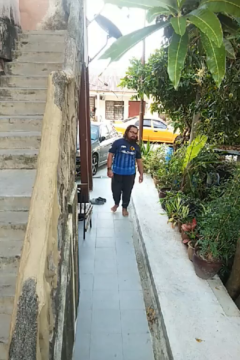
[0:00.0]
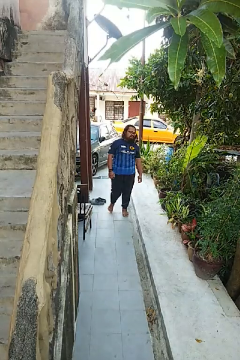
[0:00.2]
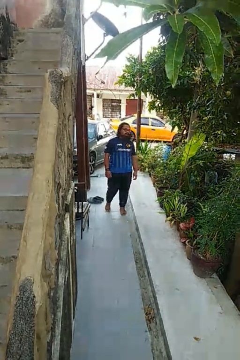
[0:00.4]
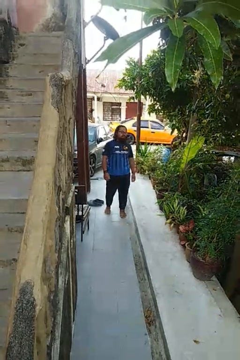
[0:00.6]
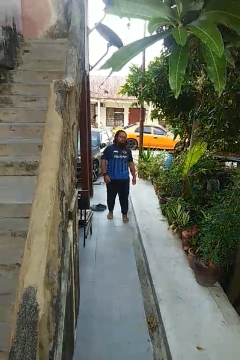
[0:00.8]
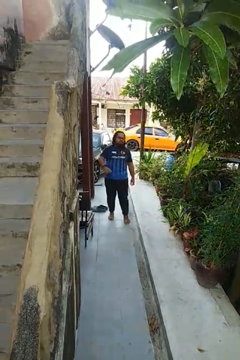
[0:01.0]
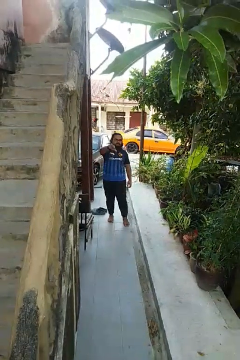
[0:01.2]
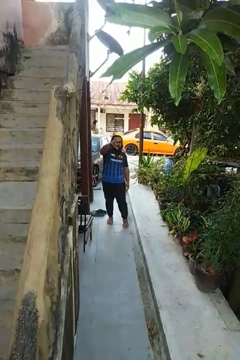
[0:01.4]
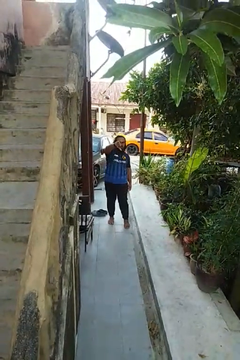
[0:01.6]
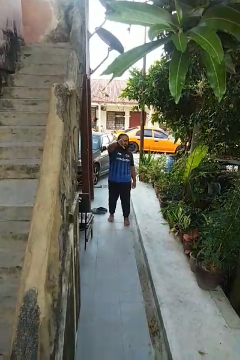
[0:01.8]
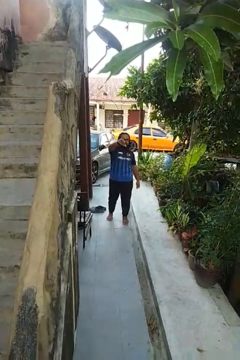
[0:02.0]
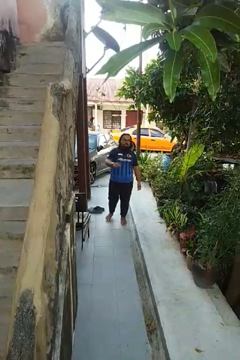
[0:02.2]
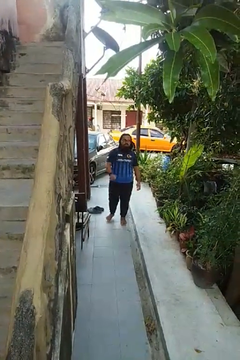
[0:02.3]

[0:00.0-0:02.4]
person gestures thumbs down

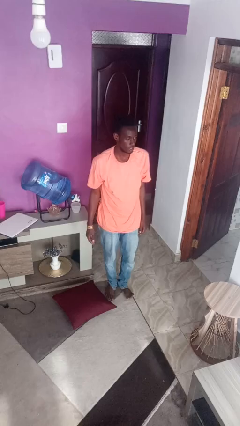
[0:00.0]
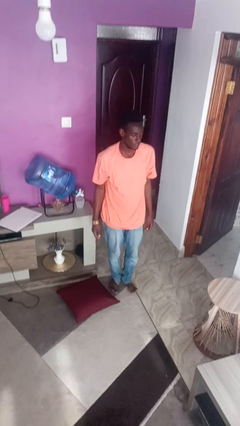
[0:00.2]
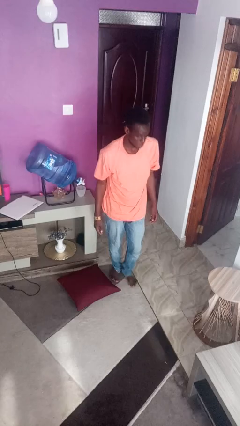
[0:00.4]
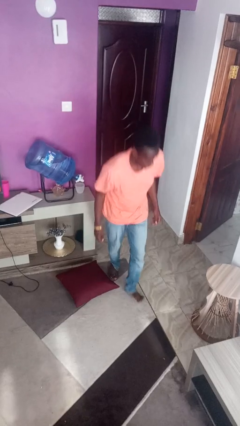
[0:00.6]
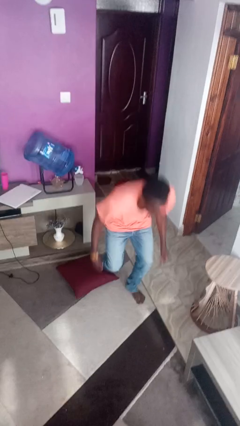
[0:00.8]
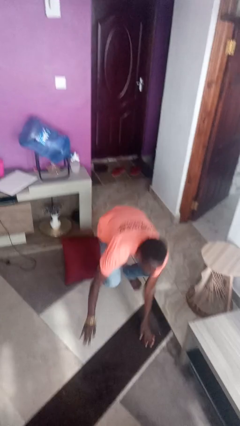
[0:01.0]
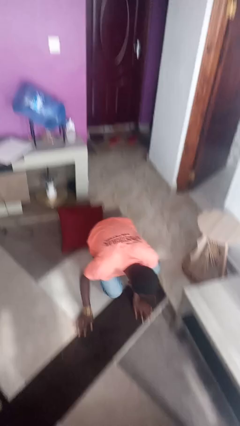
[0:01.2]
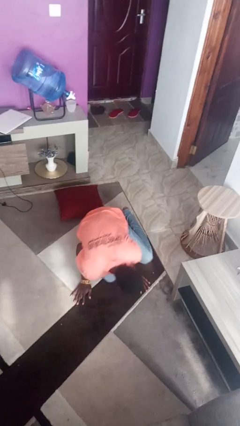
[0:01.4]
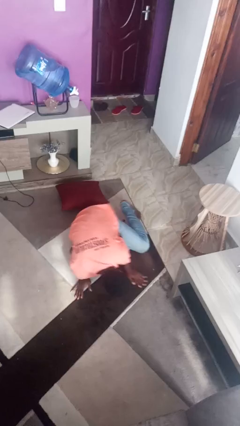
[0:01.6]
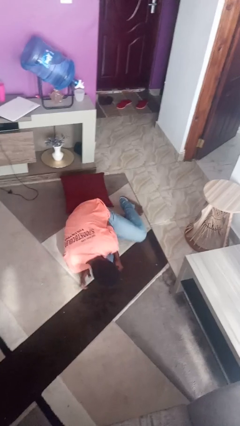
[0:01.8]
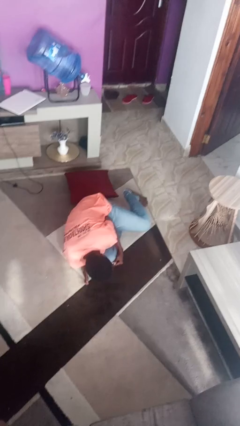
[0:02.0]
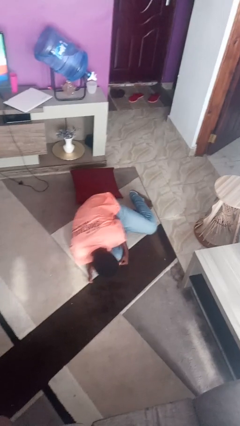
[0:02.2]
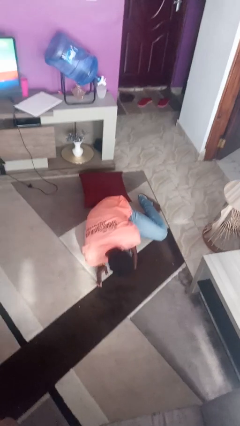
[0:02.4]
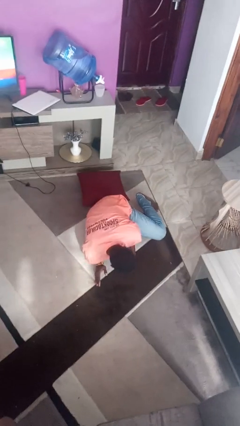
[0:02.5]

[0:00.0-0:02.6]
person trips on object on floor

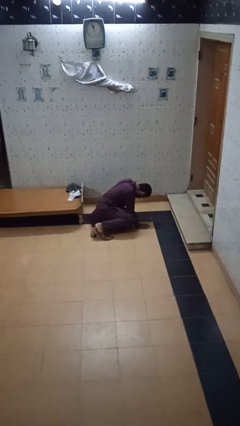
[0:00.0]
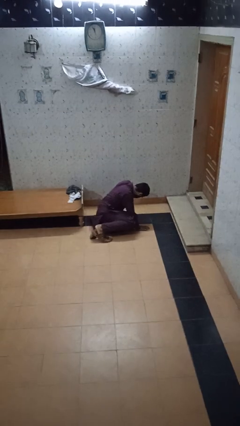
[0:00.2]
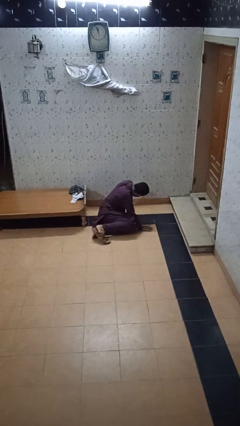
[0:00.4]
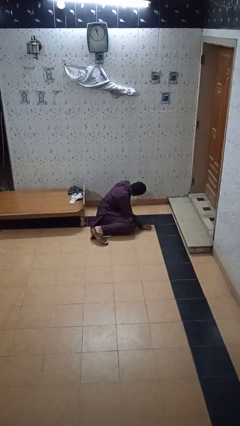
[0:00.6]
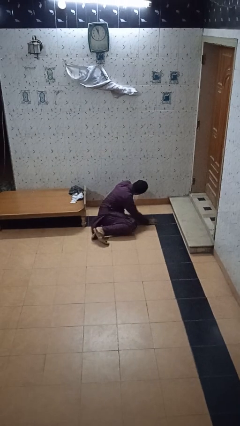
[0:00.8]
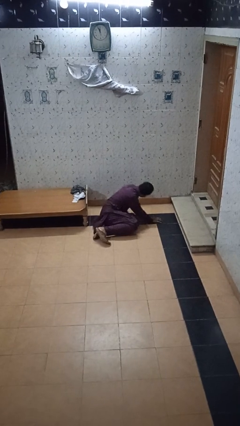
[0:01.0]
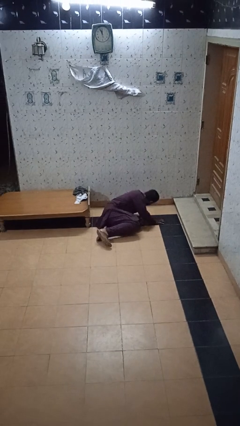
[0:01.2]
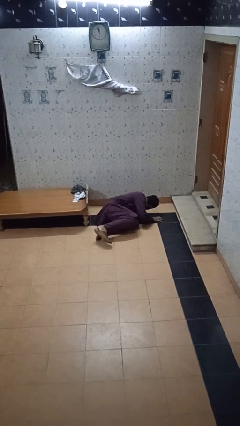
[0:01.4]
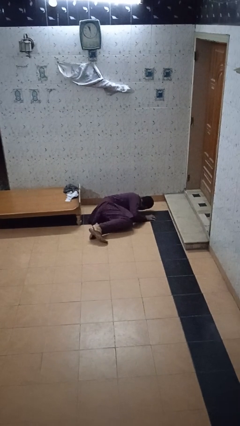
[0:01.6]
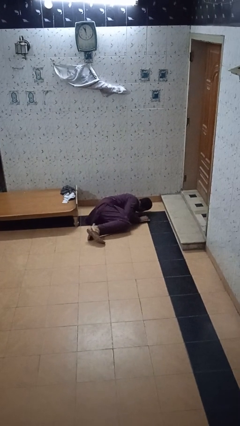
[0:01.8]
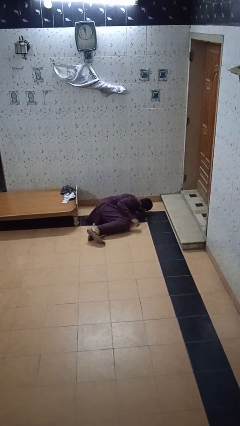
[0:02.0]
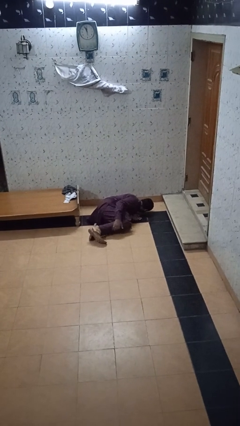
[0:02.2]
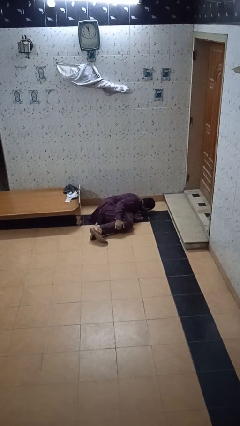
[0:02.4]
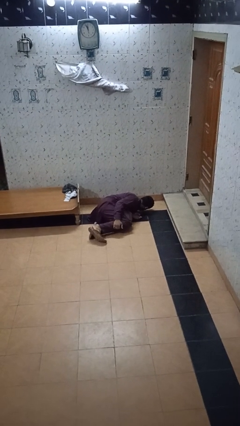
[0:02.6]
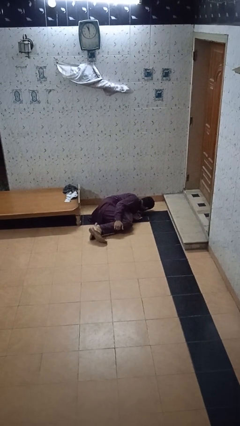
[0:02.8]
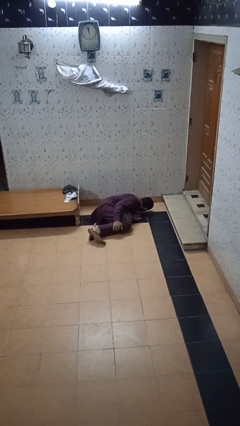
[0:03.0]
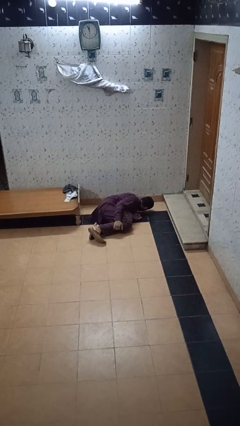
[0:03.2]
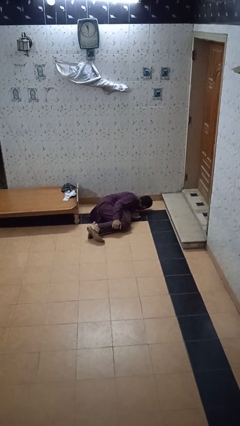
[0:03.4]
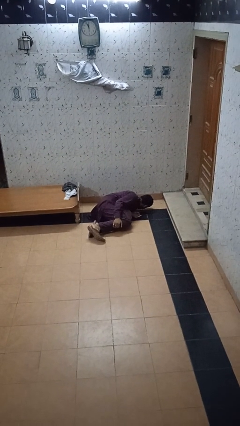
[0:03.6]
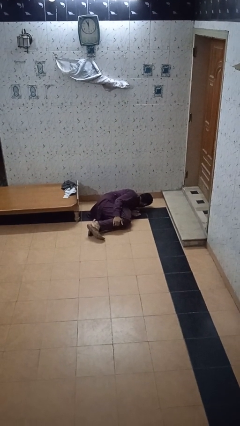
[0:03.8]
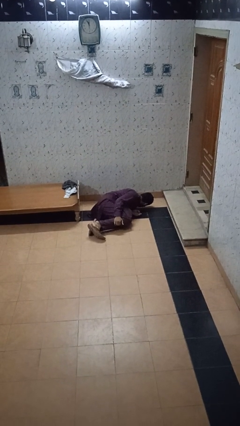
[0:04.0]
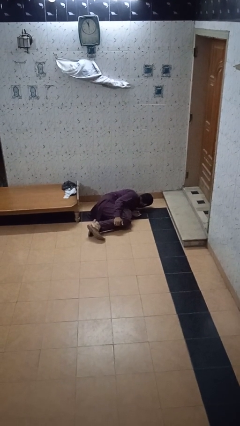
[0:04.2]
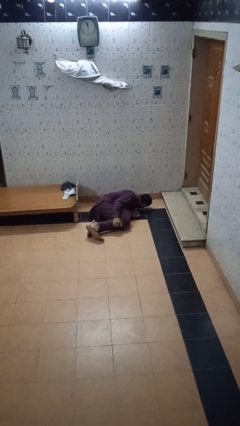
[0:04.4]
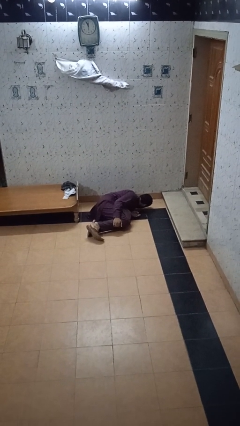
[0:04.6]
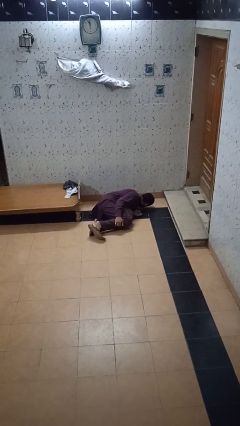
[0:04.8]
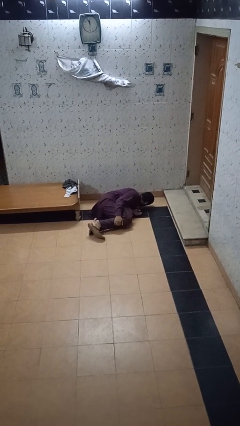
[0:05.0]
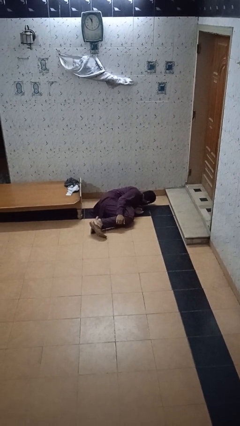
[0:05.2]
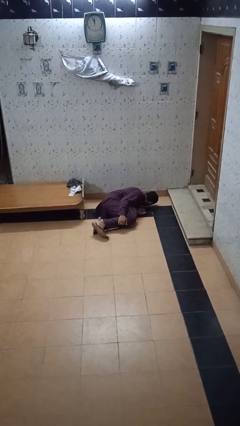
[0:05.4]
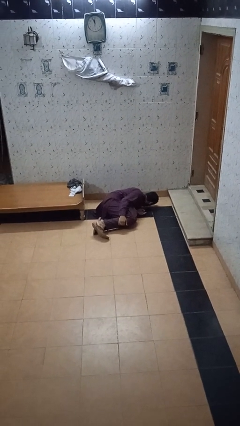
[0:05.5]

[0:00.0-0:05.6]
person lies down on floor

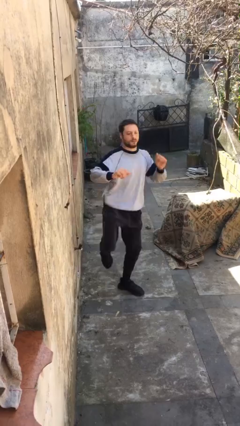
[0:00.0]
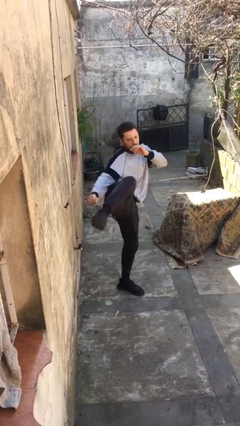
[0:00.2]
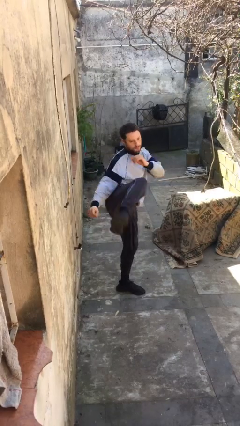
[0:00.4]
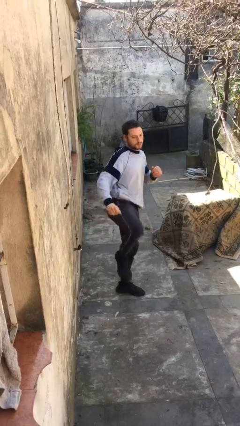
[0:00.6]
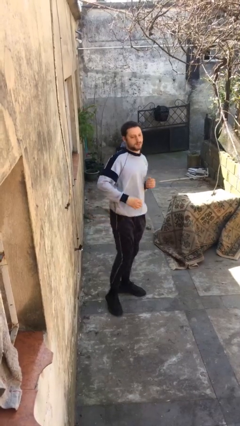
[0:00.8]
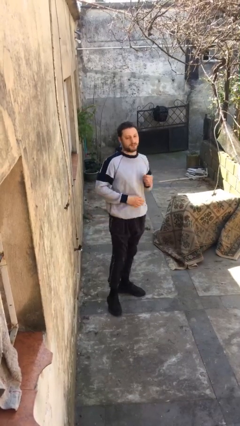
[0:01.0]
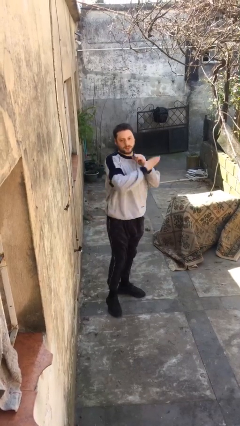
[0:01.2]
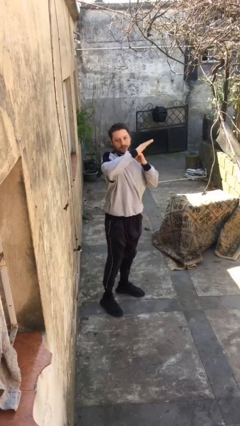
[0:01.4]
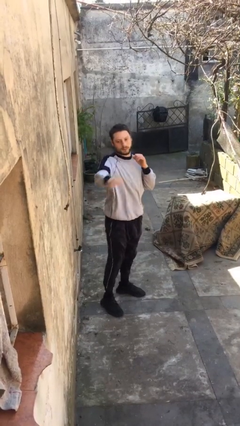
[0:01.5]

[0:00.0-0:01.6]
person karate kicks

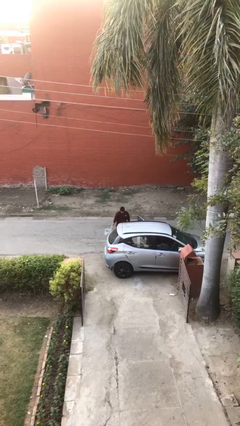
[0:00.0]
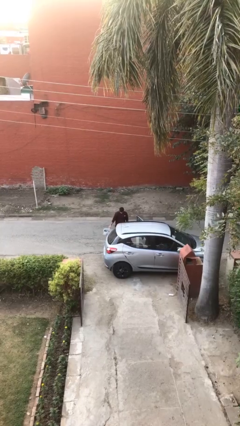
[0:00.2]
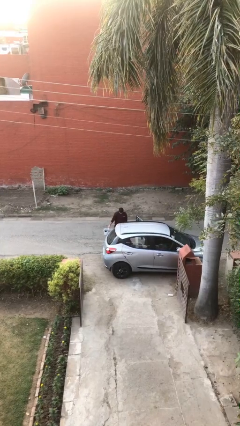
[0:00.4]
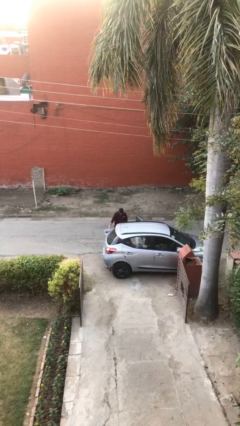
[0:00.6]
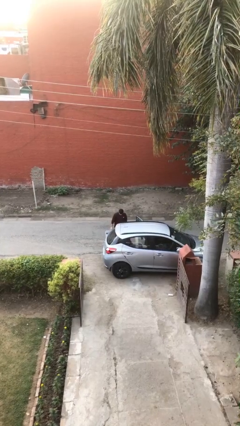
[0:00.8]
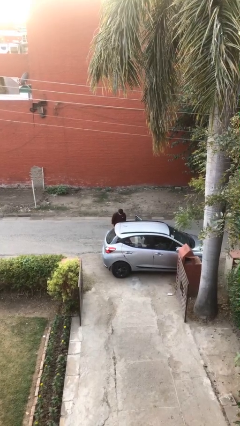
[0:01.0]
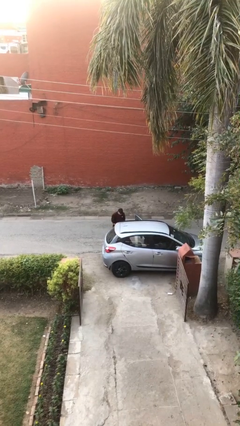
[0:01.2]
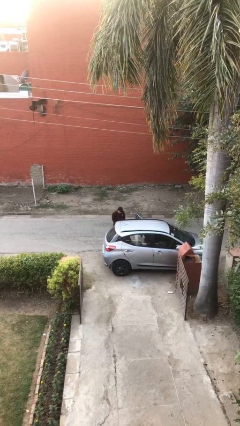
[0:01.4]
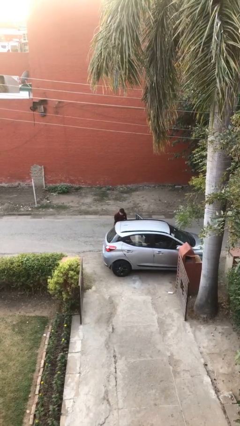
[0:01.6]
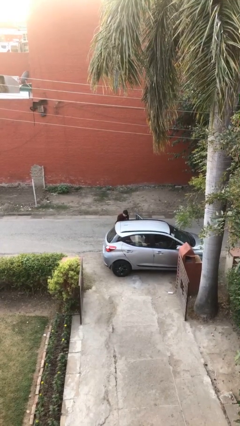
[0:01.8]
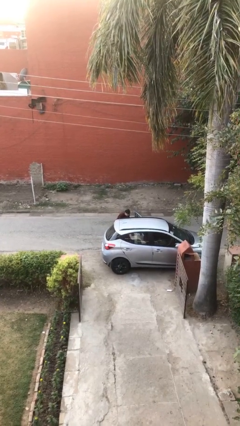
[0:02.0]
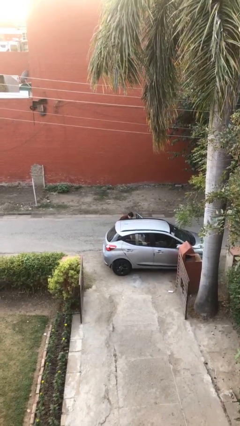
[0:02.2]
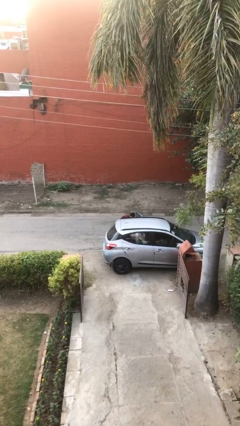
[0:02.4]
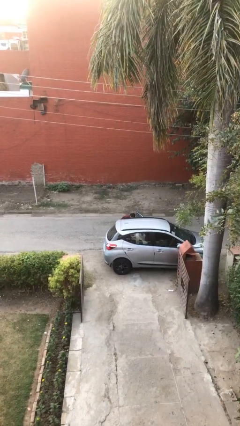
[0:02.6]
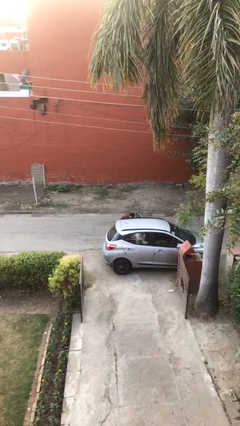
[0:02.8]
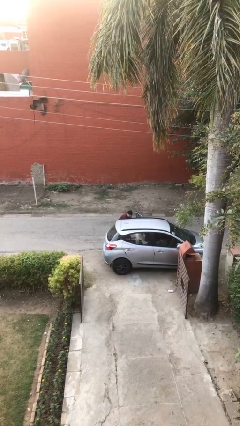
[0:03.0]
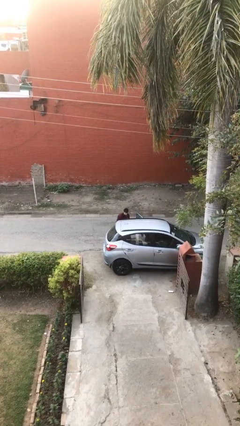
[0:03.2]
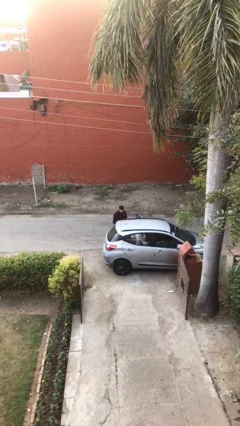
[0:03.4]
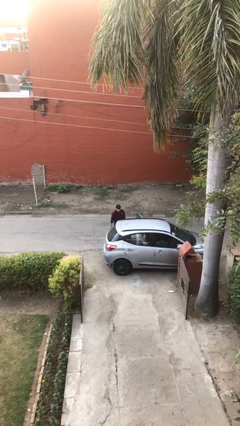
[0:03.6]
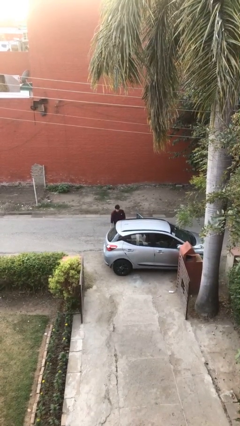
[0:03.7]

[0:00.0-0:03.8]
person loads car

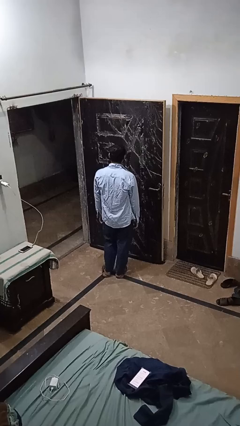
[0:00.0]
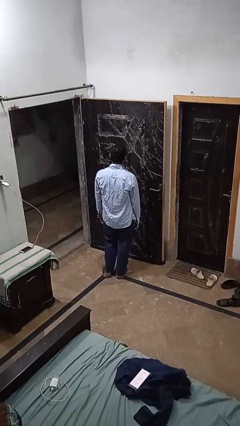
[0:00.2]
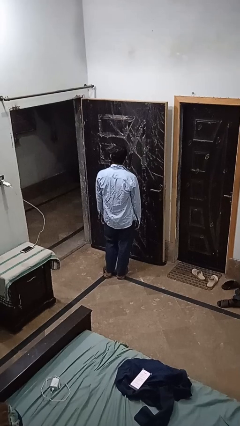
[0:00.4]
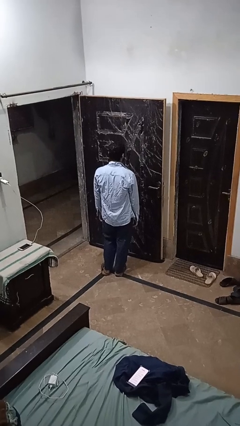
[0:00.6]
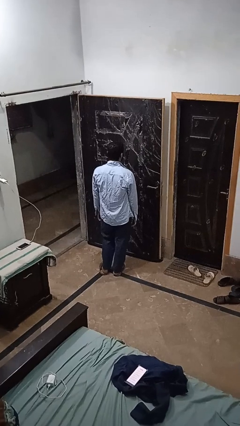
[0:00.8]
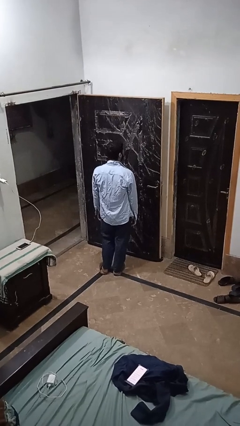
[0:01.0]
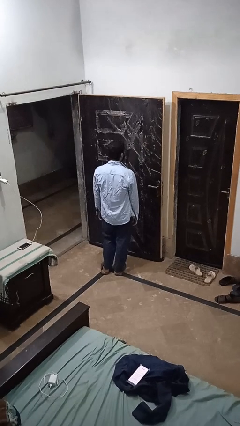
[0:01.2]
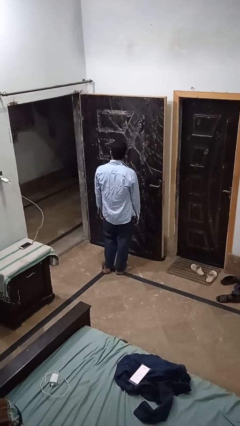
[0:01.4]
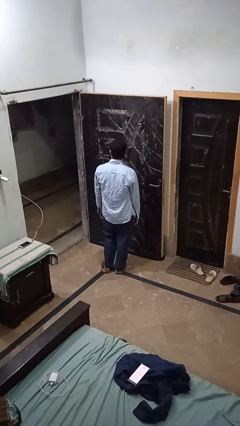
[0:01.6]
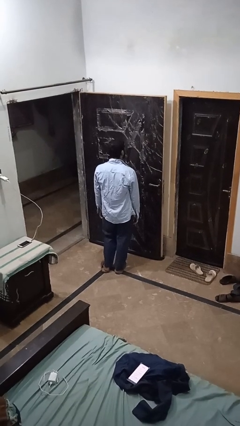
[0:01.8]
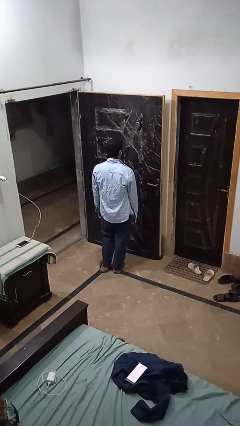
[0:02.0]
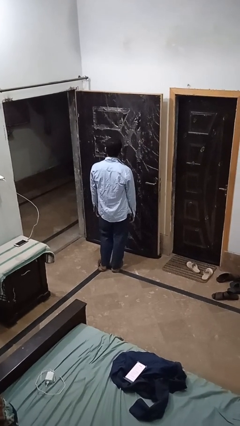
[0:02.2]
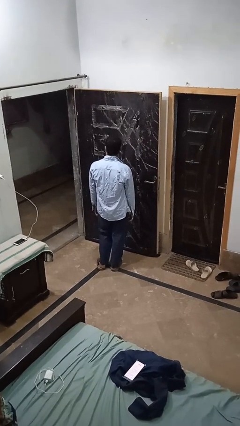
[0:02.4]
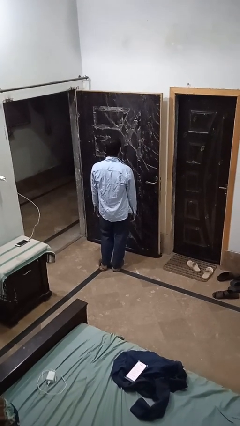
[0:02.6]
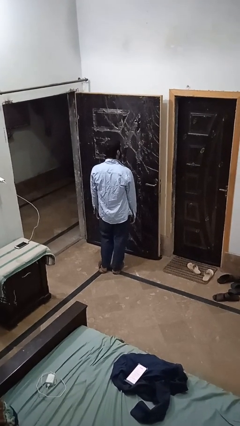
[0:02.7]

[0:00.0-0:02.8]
person shakes head
